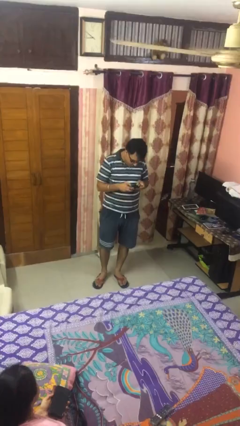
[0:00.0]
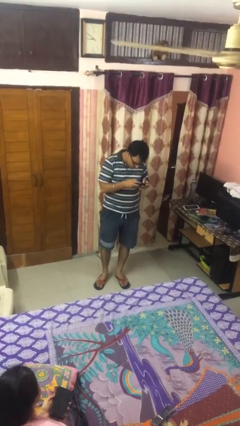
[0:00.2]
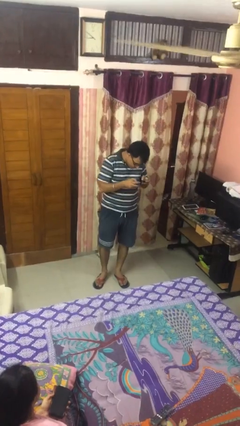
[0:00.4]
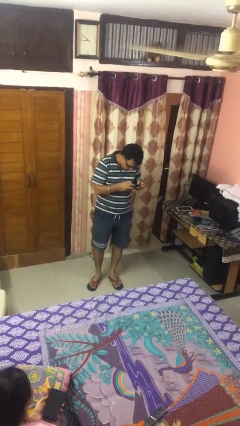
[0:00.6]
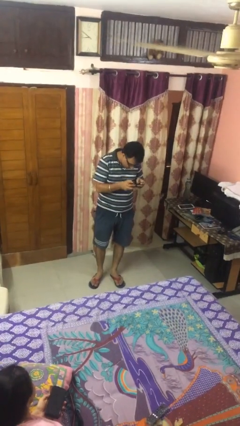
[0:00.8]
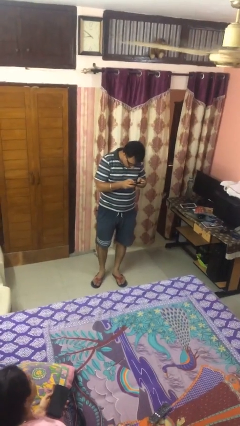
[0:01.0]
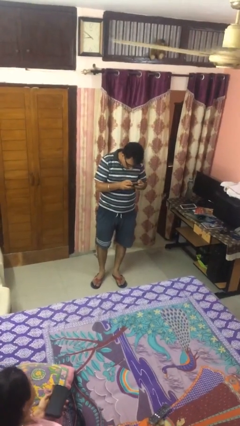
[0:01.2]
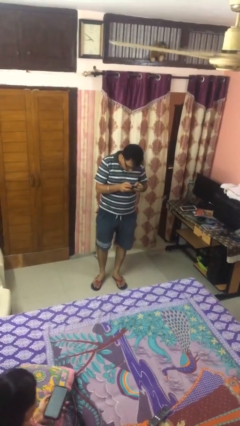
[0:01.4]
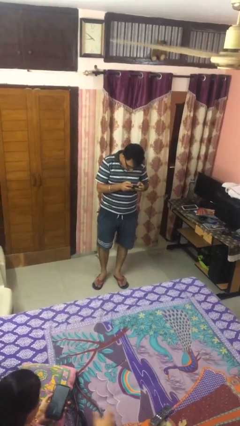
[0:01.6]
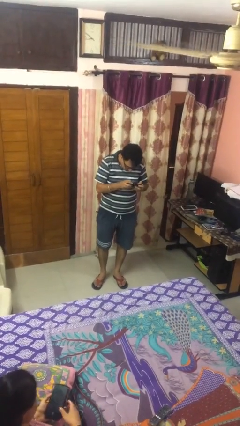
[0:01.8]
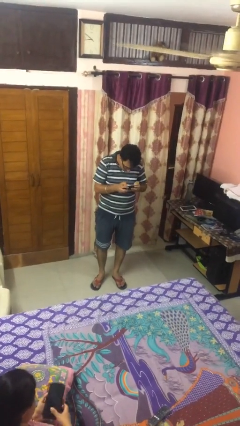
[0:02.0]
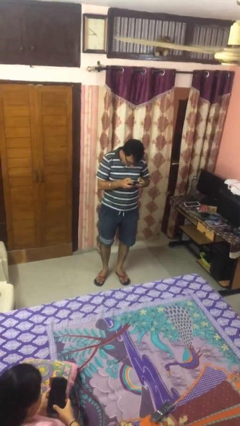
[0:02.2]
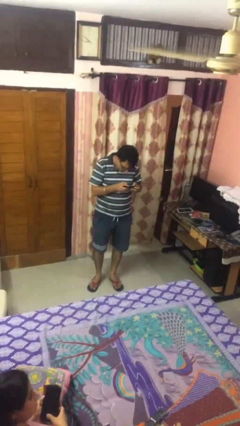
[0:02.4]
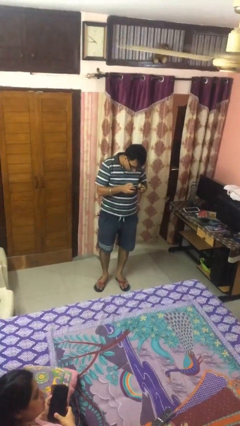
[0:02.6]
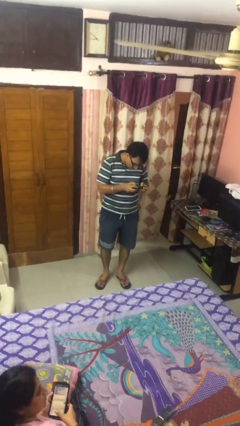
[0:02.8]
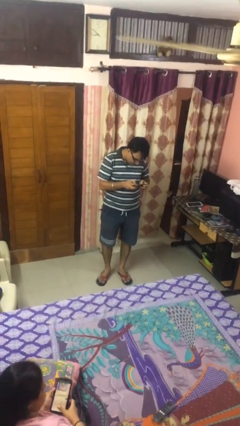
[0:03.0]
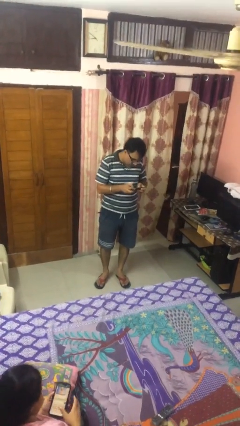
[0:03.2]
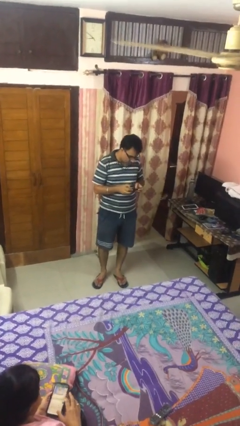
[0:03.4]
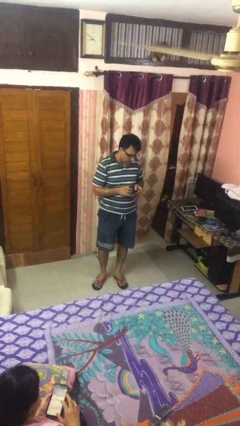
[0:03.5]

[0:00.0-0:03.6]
person interacts with handheld game

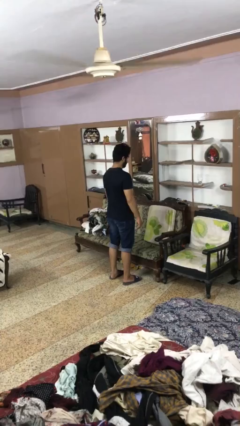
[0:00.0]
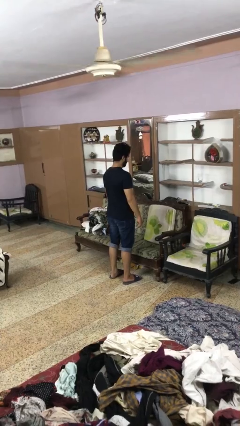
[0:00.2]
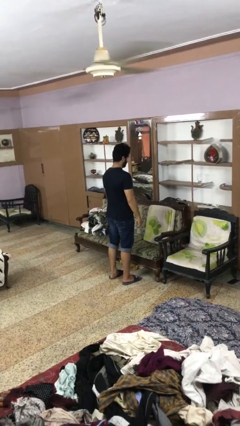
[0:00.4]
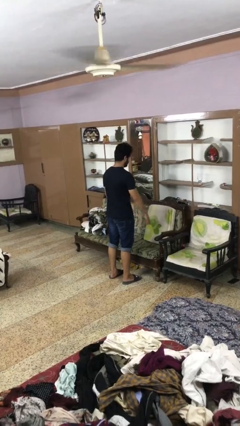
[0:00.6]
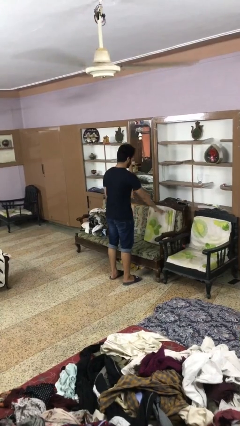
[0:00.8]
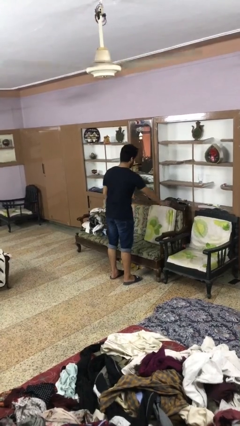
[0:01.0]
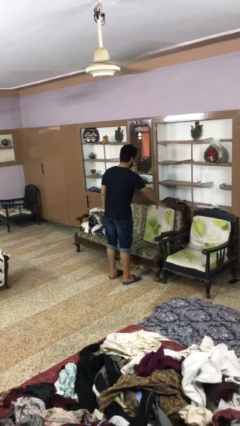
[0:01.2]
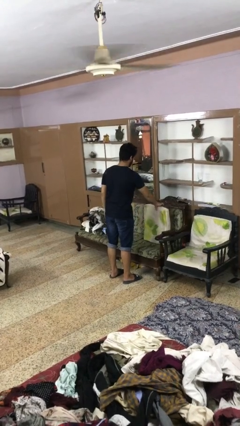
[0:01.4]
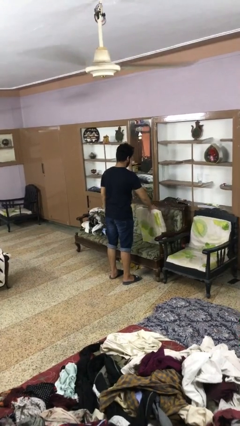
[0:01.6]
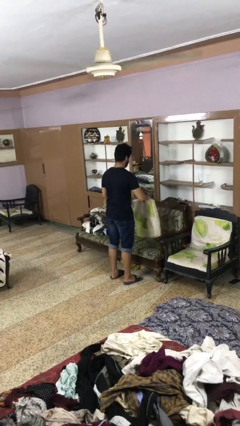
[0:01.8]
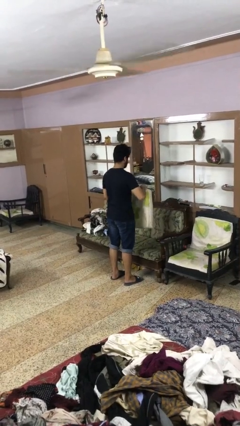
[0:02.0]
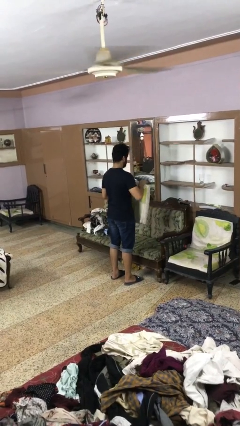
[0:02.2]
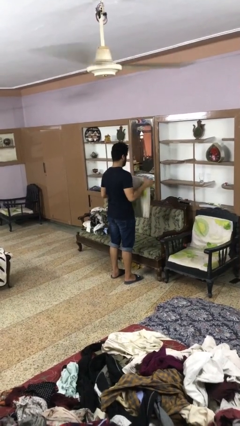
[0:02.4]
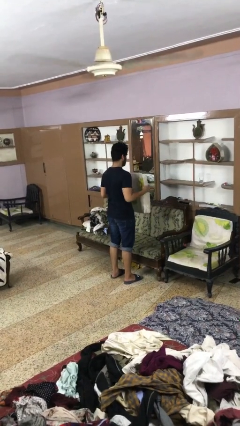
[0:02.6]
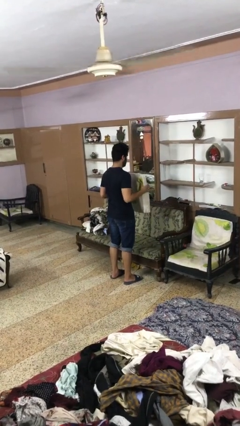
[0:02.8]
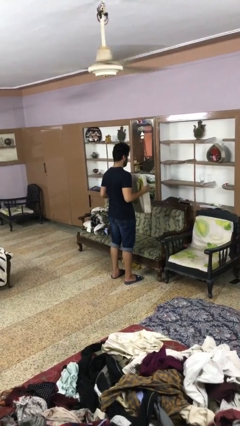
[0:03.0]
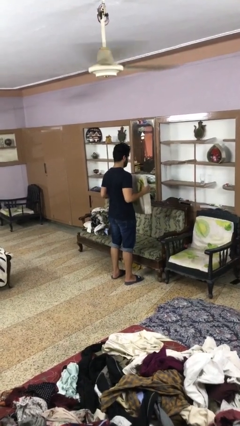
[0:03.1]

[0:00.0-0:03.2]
person picks up object from couch

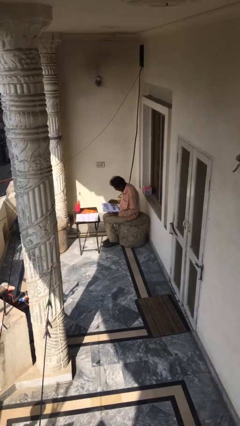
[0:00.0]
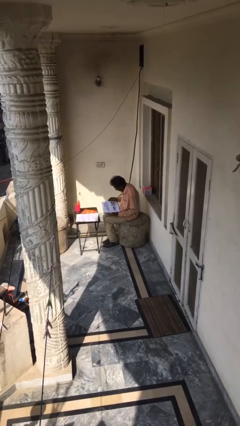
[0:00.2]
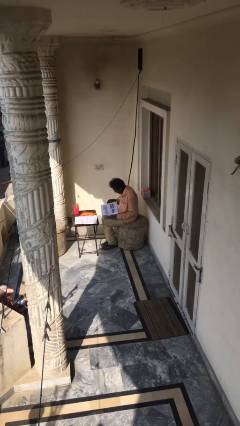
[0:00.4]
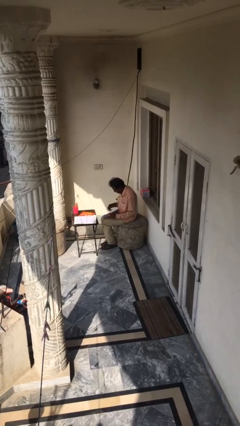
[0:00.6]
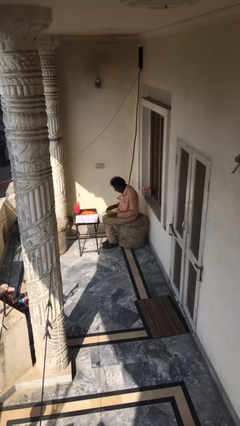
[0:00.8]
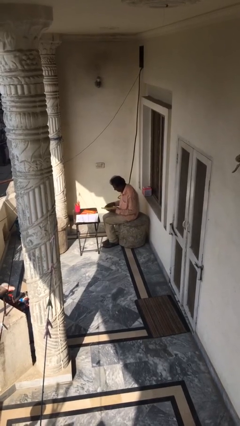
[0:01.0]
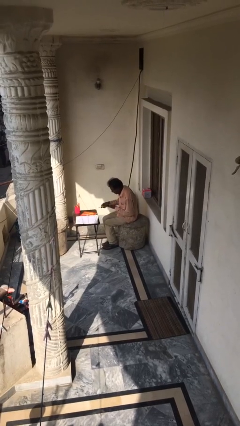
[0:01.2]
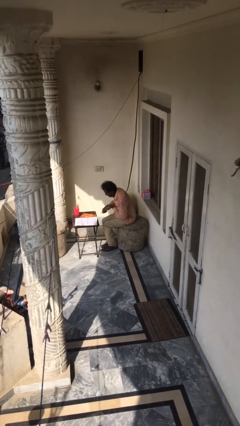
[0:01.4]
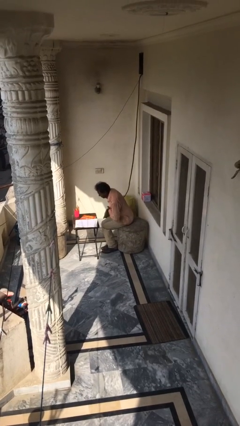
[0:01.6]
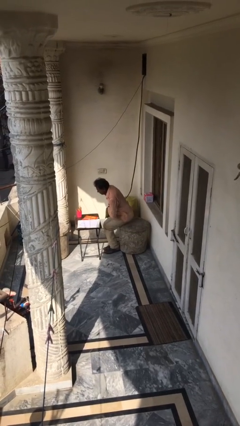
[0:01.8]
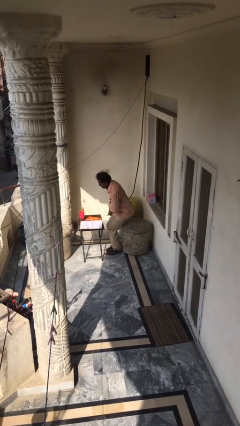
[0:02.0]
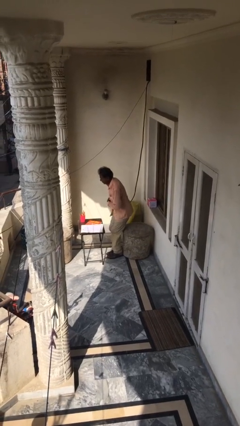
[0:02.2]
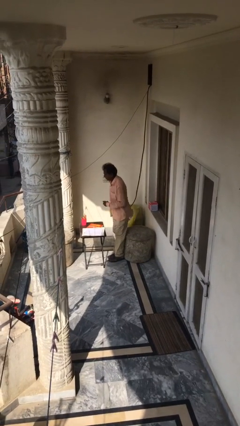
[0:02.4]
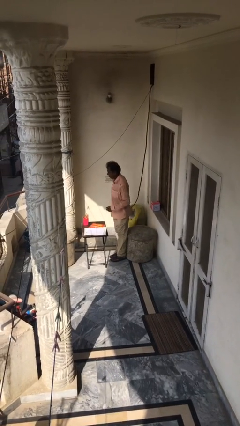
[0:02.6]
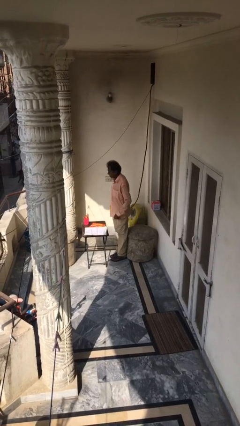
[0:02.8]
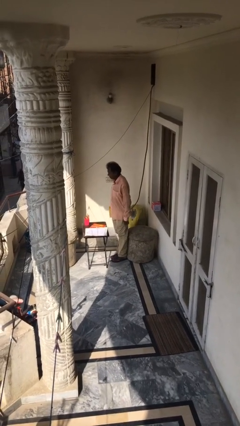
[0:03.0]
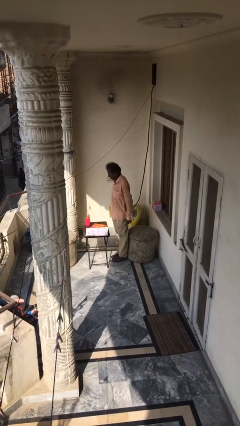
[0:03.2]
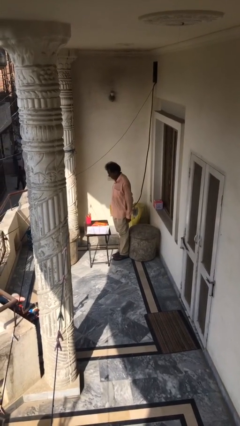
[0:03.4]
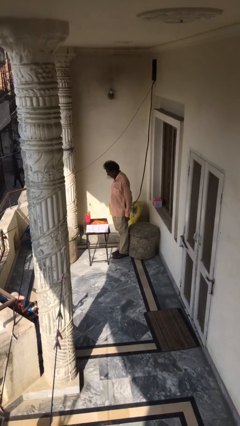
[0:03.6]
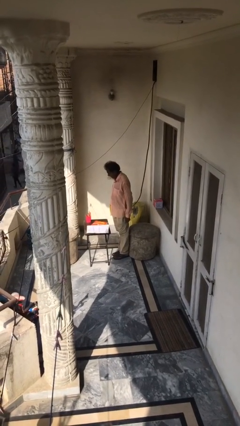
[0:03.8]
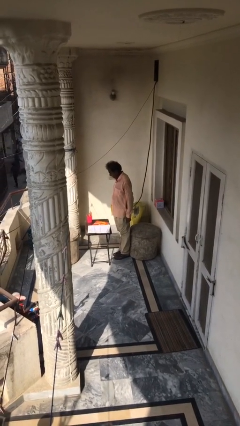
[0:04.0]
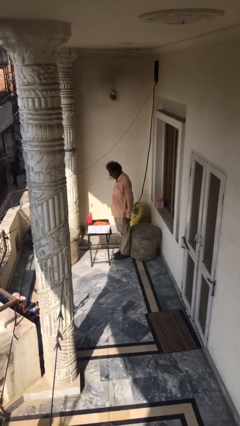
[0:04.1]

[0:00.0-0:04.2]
person stands up

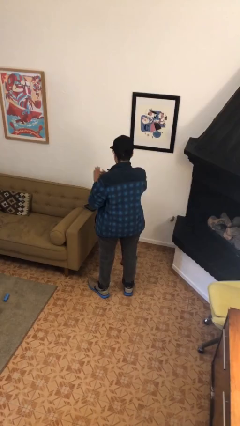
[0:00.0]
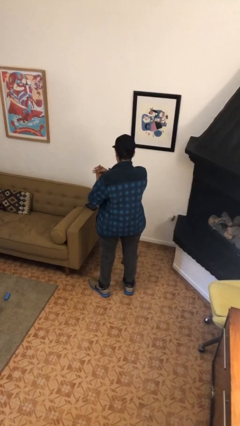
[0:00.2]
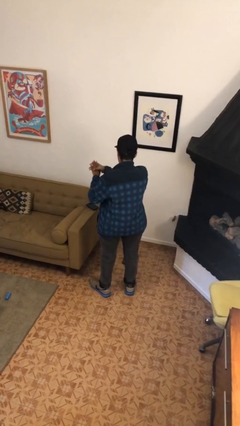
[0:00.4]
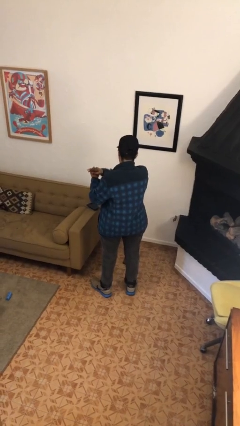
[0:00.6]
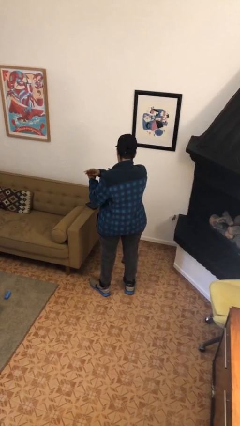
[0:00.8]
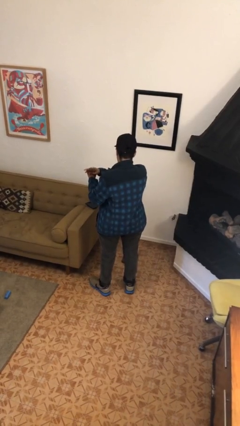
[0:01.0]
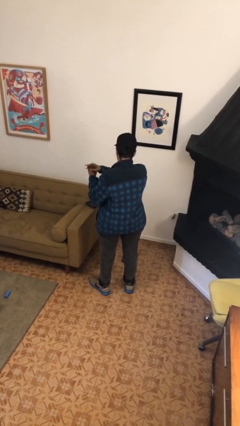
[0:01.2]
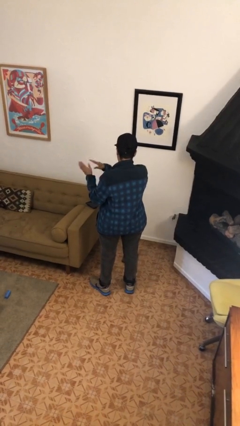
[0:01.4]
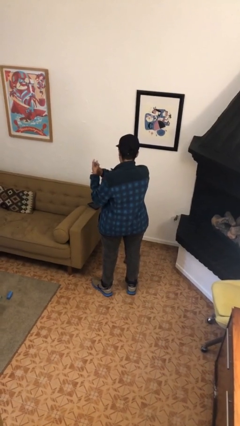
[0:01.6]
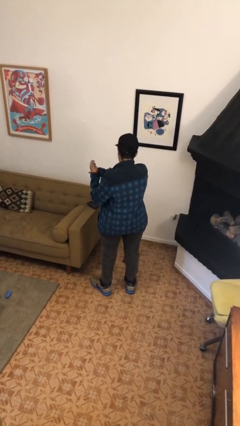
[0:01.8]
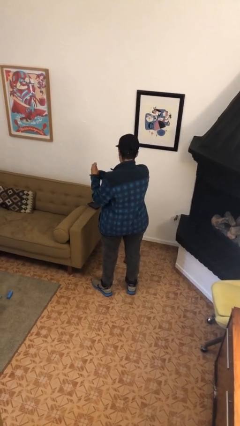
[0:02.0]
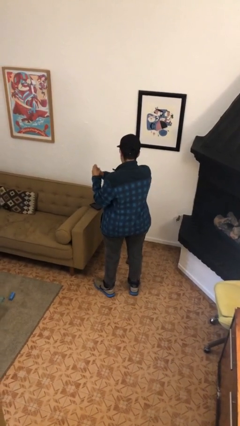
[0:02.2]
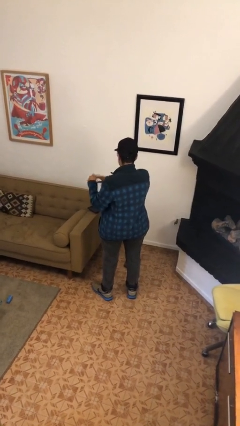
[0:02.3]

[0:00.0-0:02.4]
person cracks knuckles

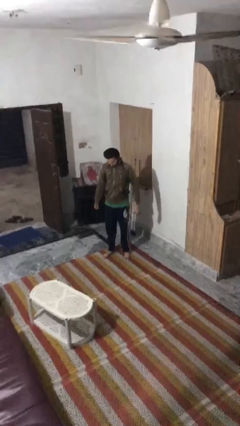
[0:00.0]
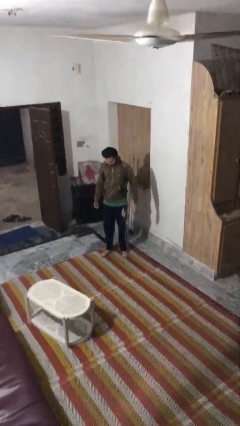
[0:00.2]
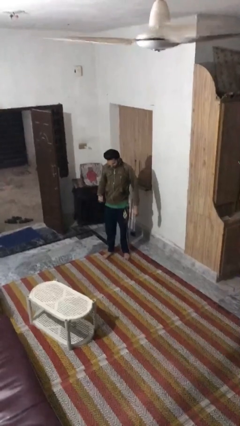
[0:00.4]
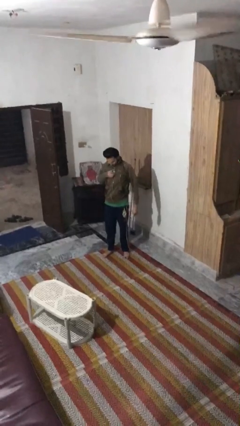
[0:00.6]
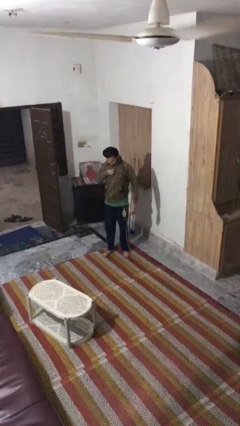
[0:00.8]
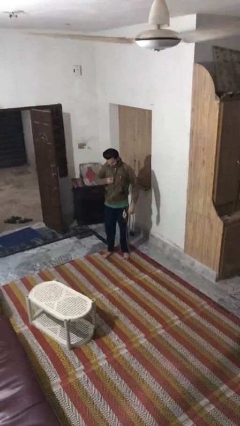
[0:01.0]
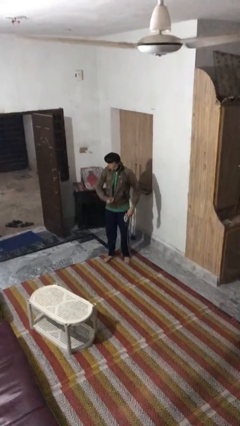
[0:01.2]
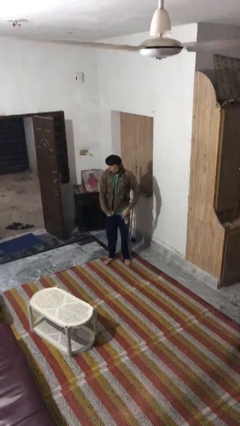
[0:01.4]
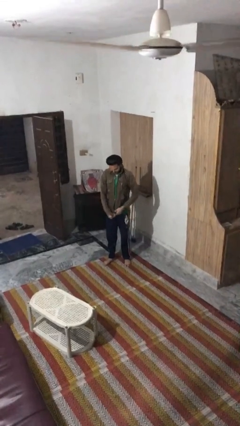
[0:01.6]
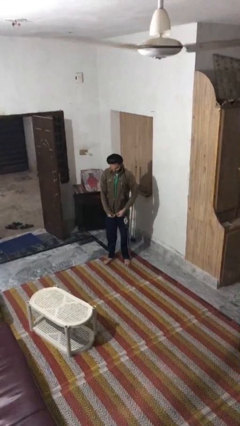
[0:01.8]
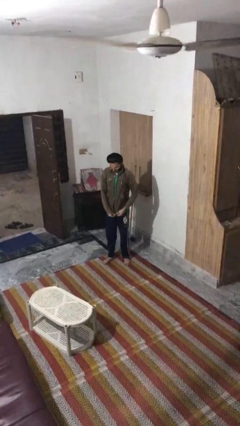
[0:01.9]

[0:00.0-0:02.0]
person unzips jacket

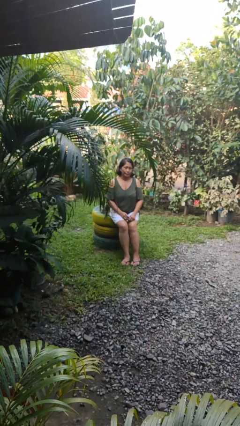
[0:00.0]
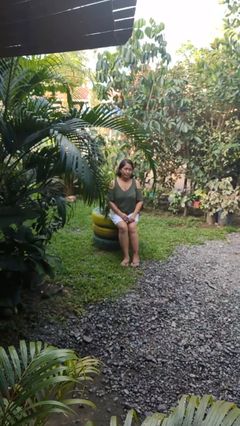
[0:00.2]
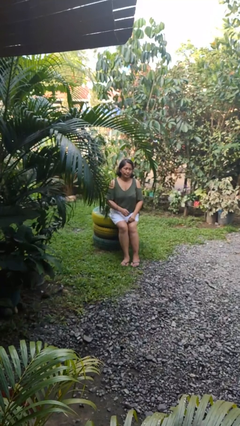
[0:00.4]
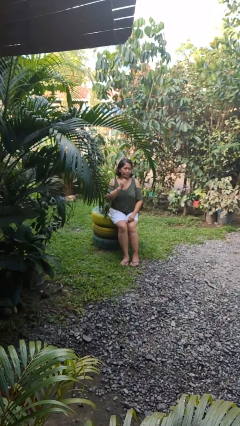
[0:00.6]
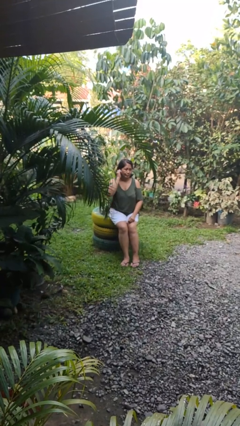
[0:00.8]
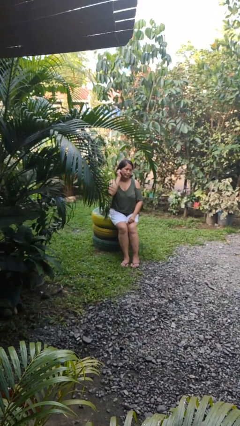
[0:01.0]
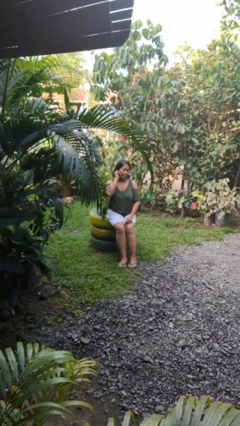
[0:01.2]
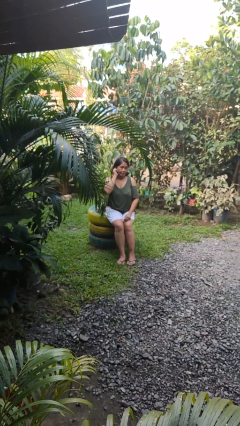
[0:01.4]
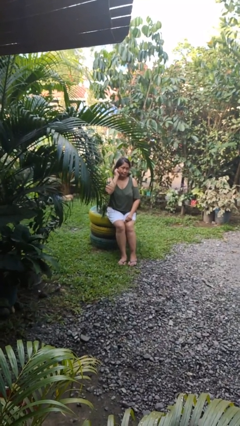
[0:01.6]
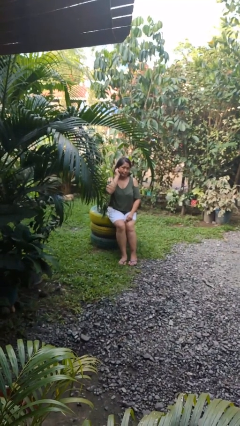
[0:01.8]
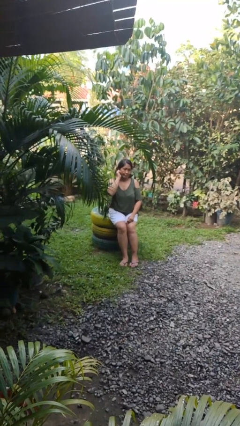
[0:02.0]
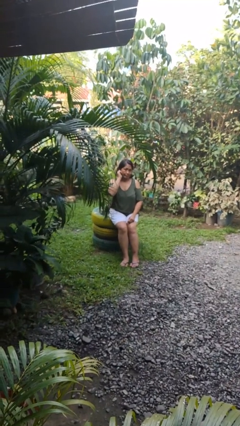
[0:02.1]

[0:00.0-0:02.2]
person touches earlobe
